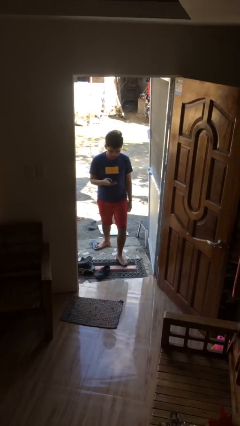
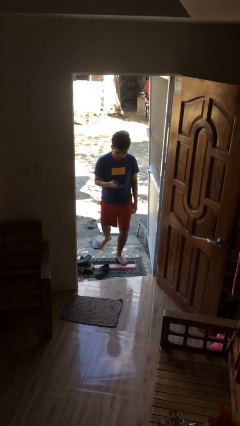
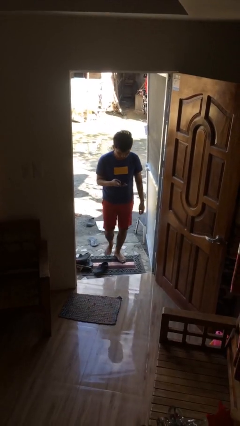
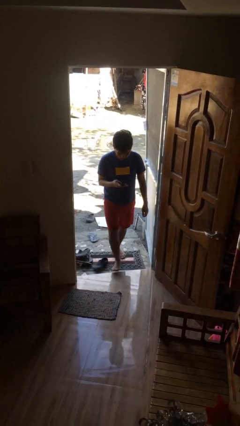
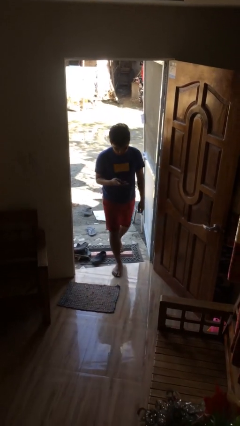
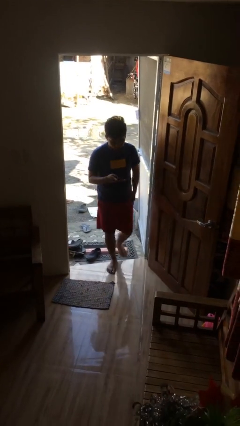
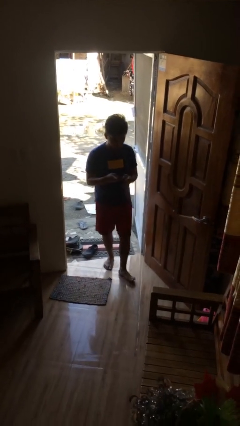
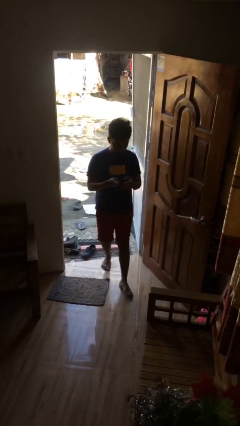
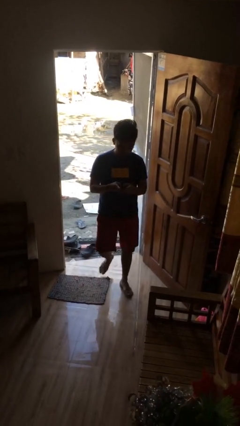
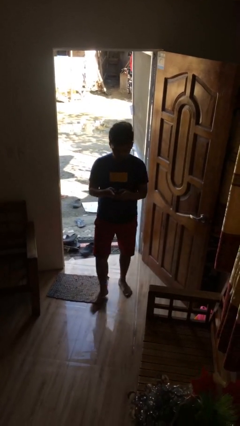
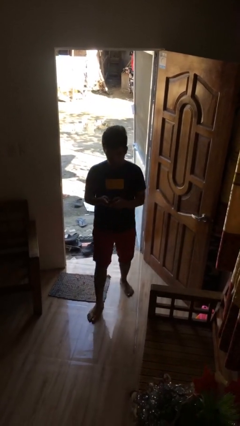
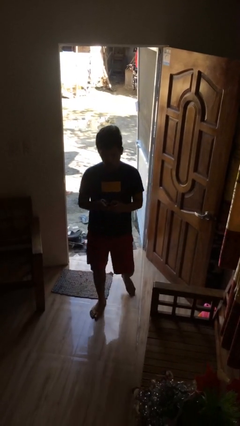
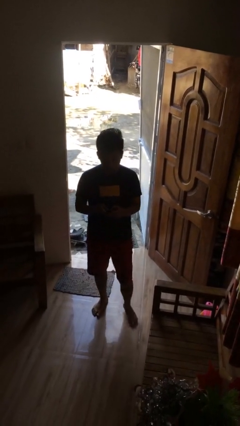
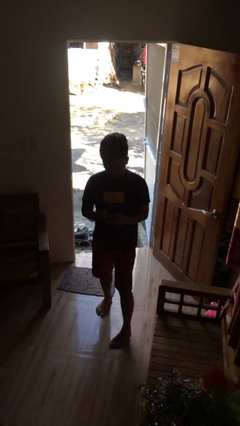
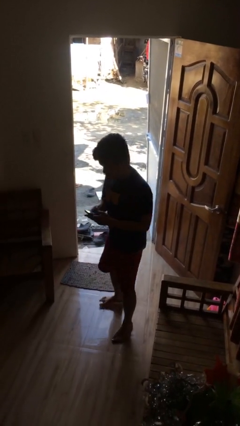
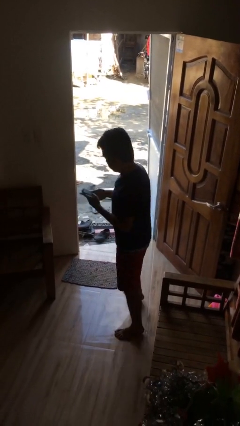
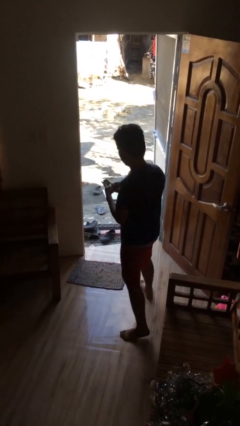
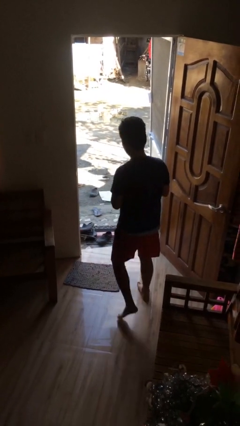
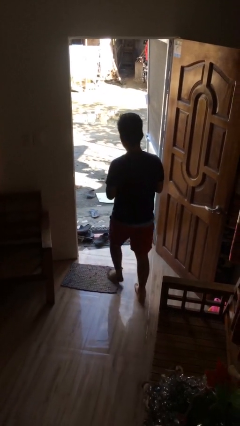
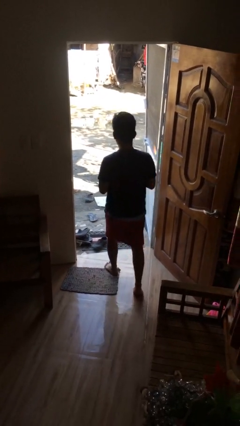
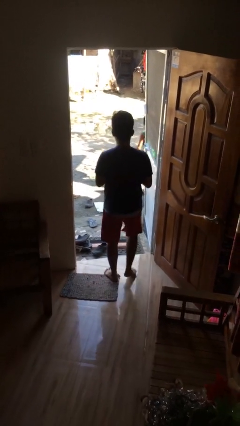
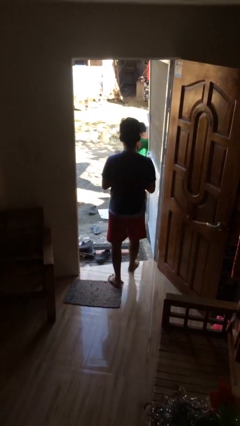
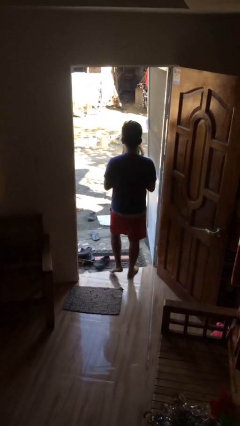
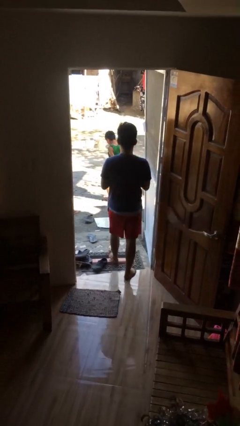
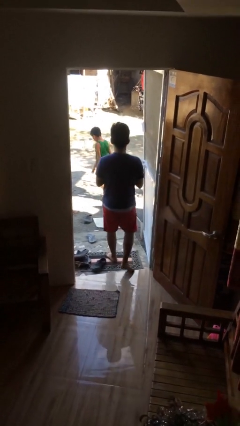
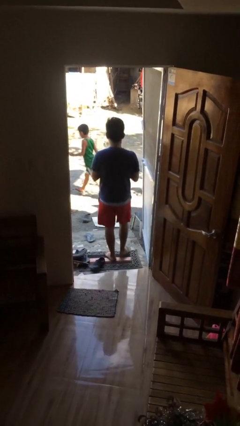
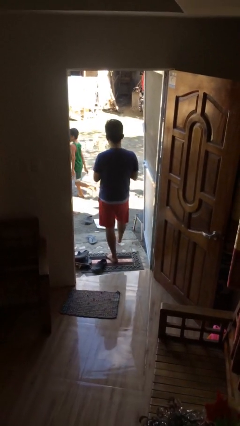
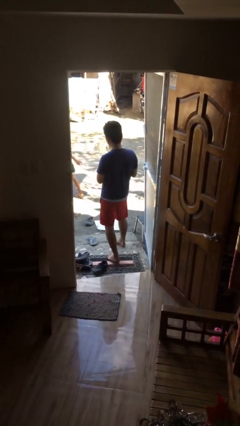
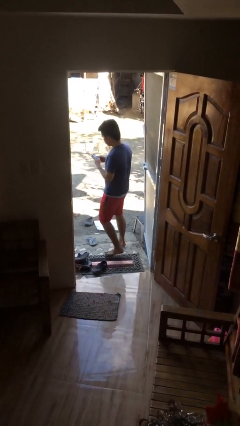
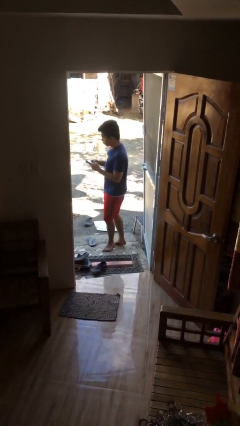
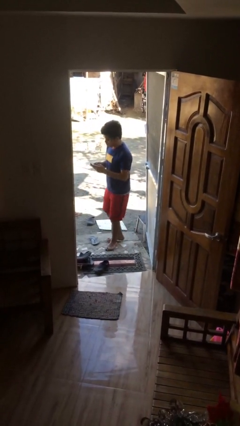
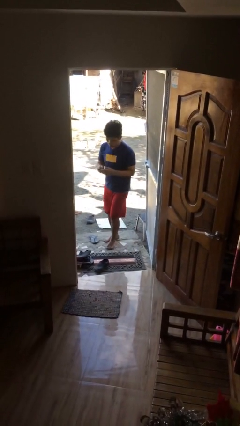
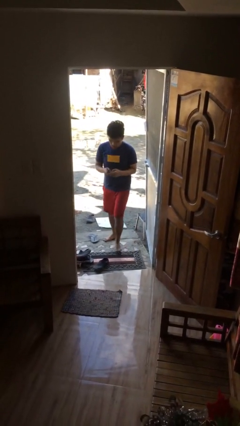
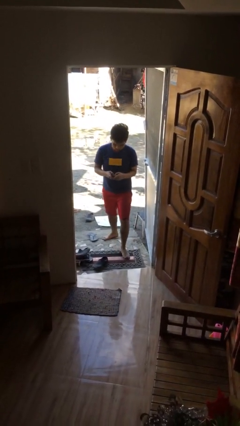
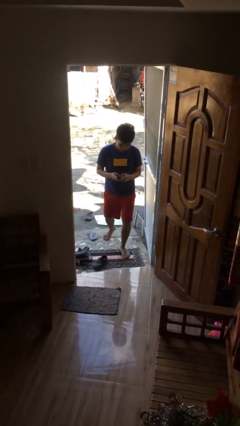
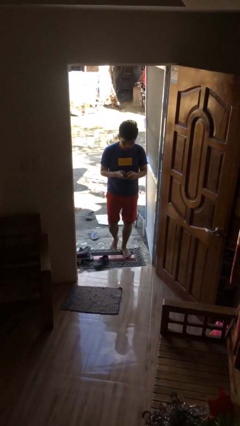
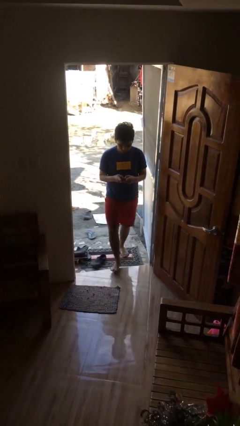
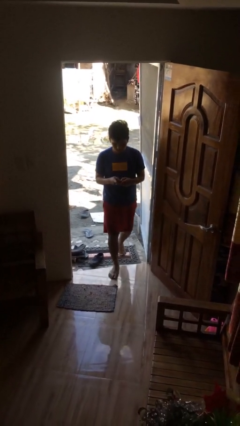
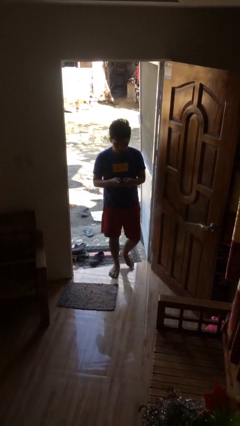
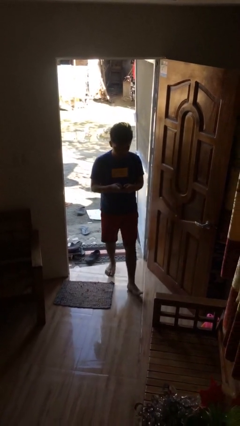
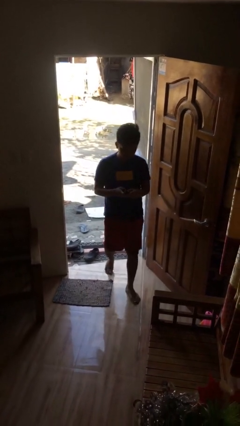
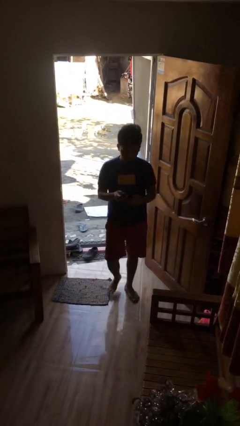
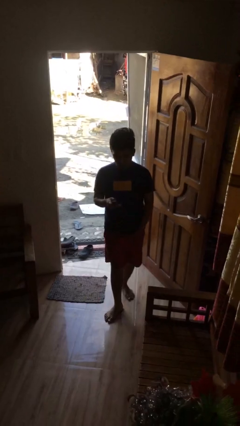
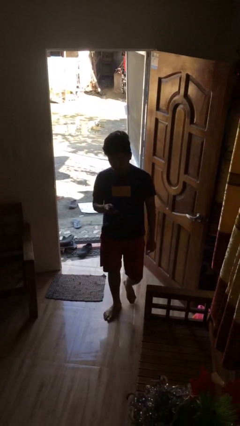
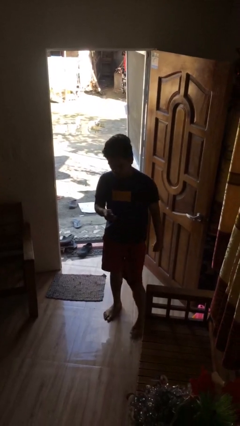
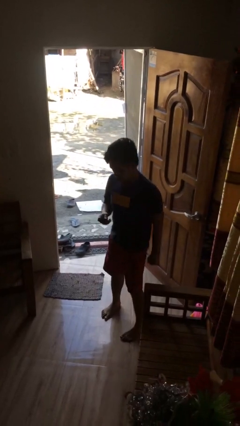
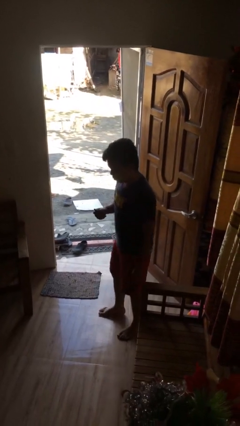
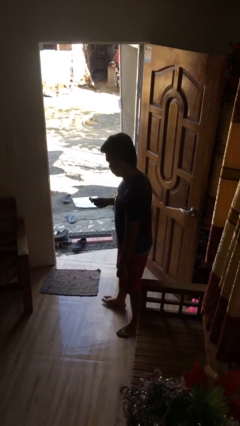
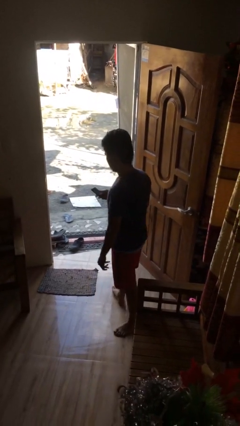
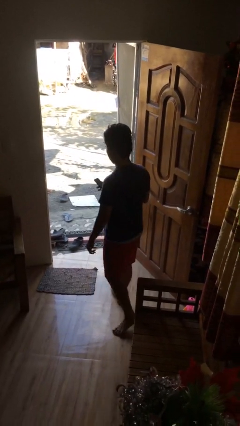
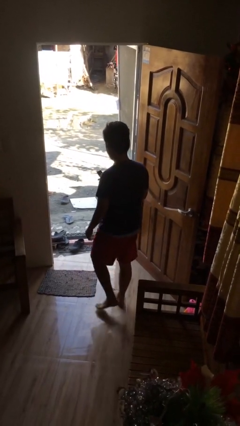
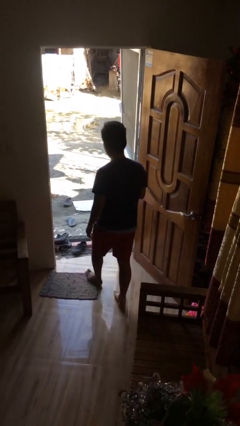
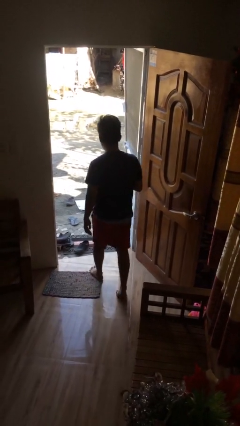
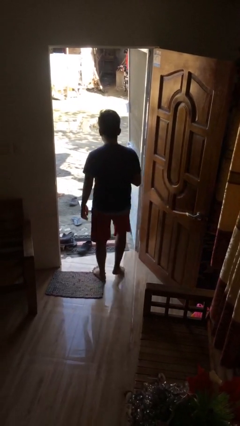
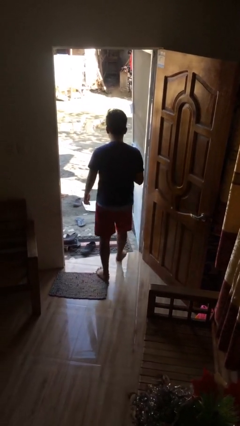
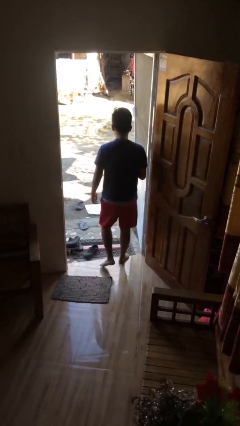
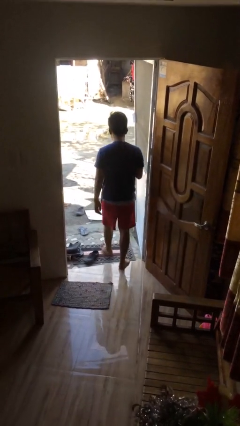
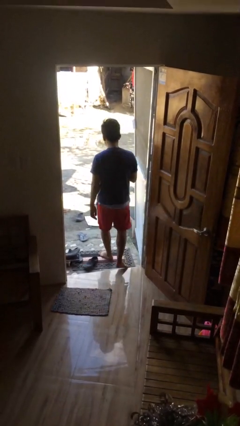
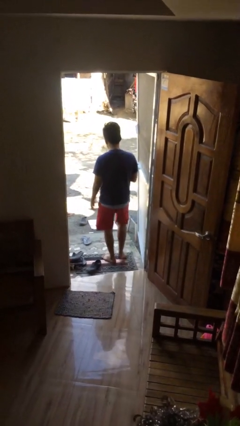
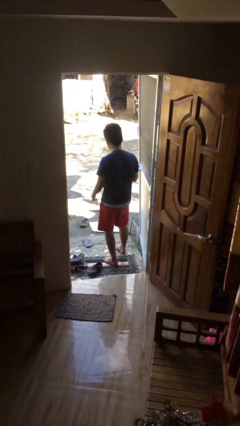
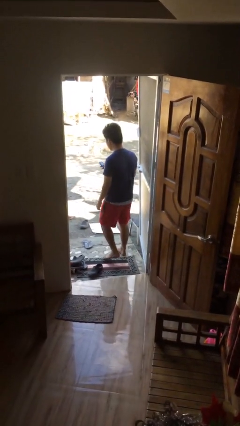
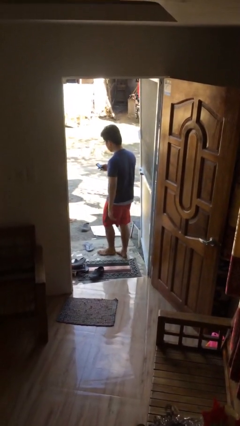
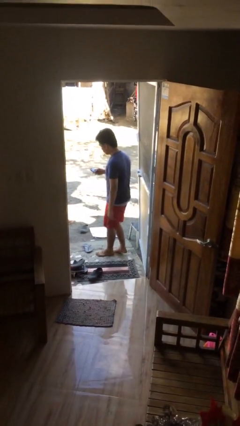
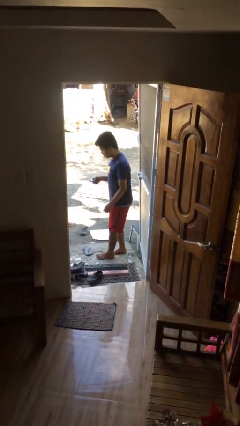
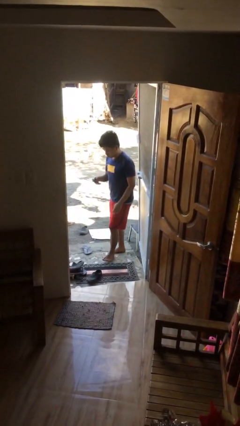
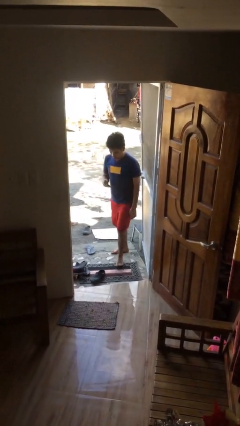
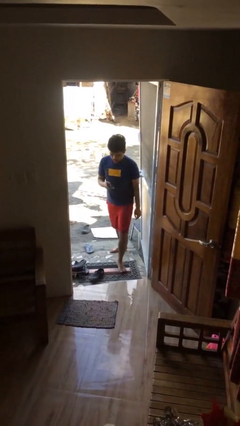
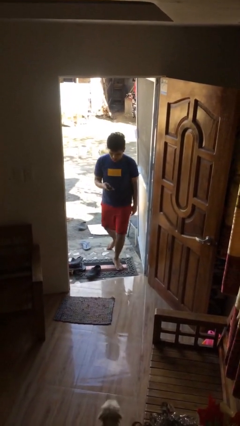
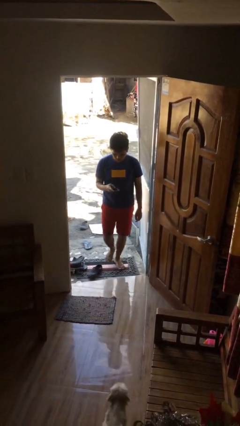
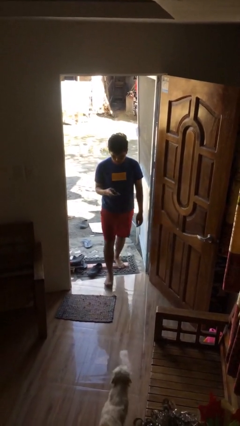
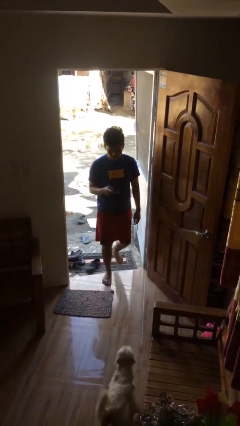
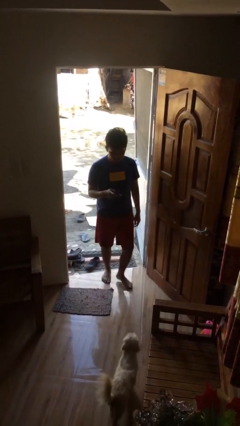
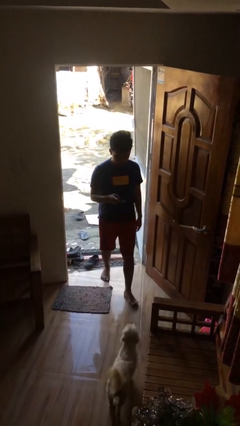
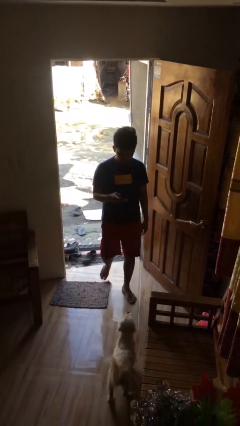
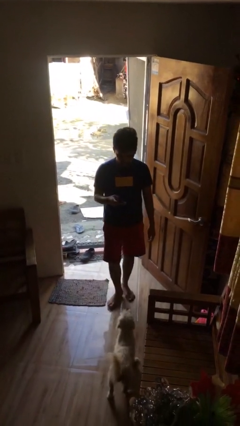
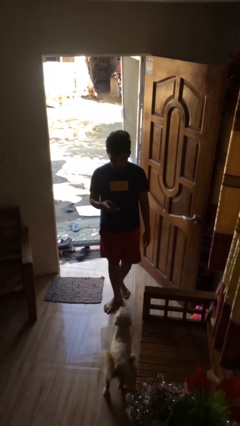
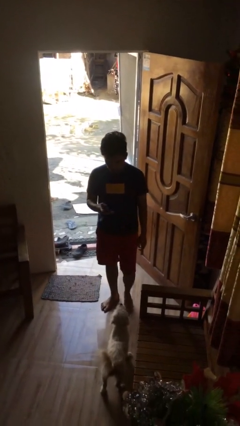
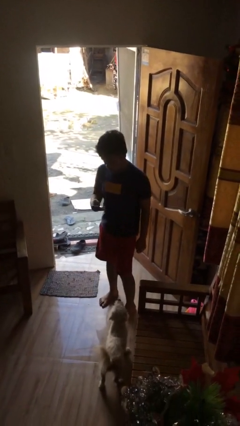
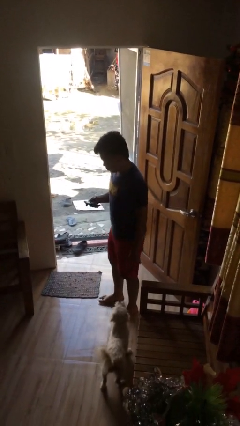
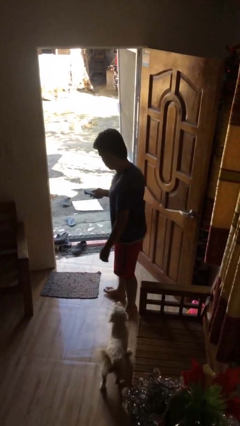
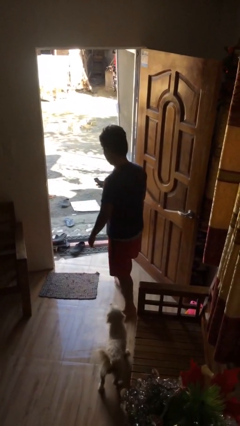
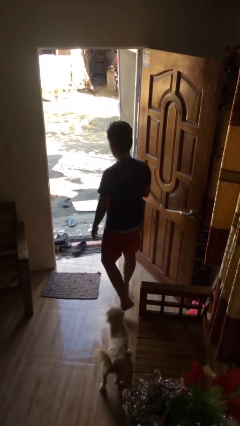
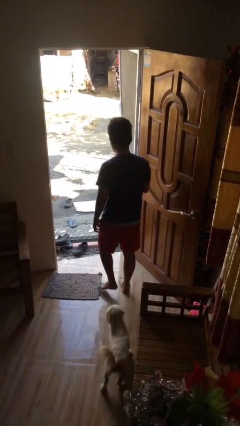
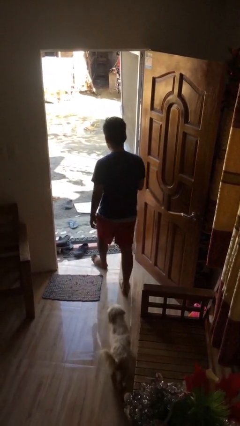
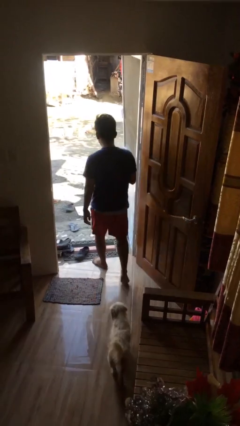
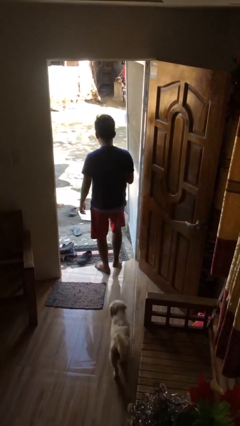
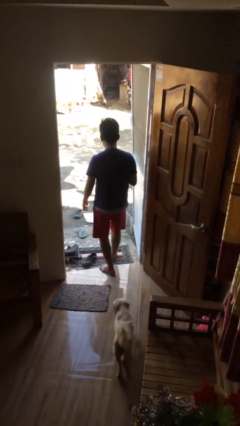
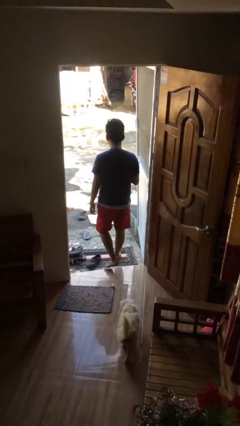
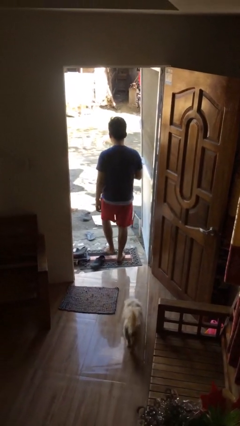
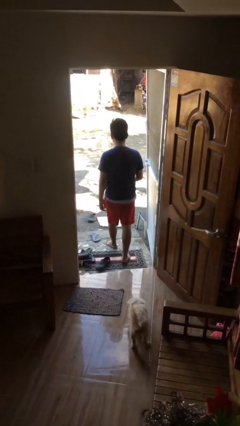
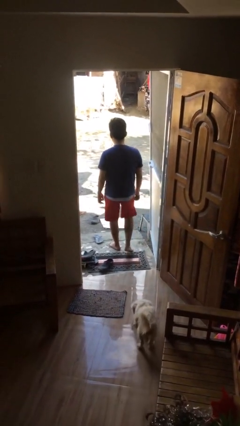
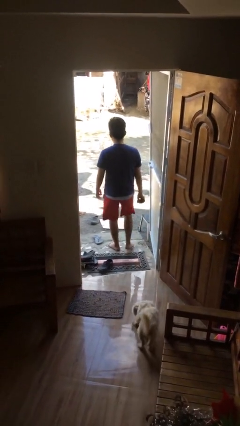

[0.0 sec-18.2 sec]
person texts on phone
